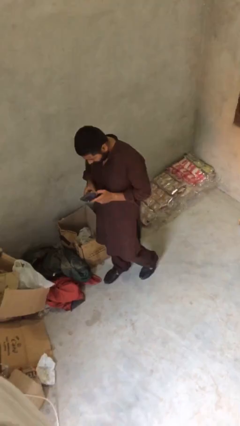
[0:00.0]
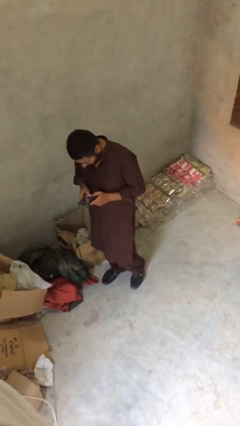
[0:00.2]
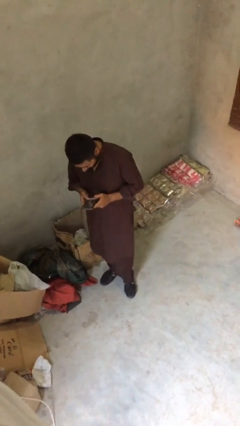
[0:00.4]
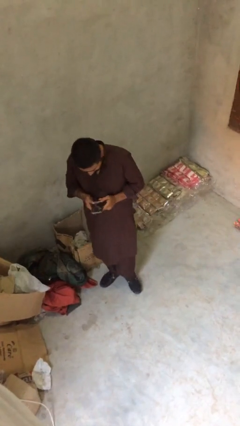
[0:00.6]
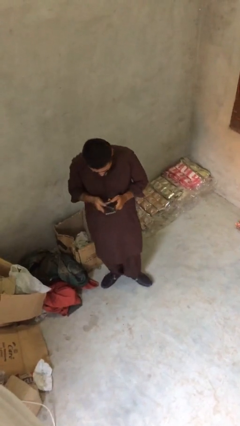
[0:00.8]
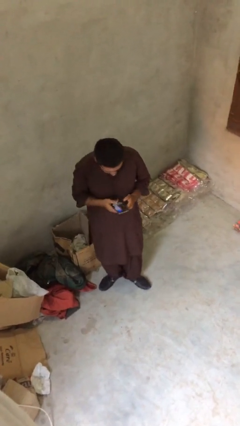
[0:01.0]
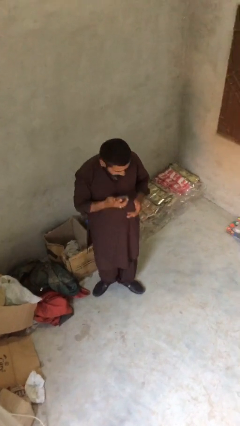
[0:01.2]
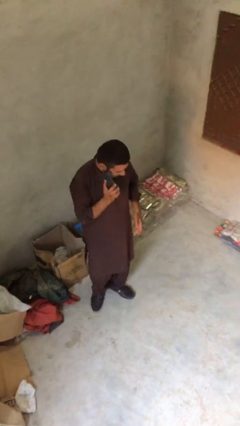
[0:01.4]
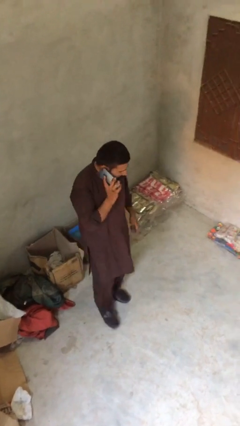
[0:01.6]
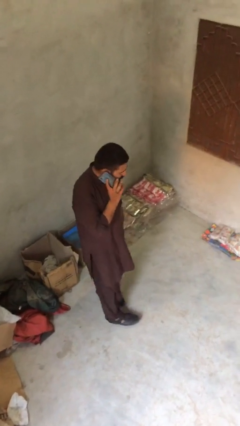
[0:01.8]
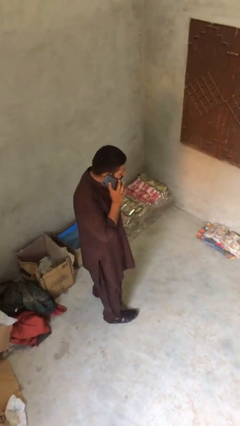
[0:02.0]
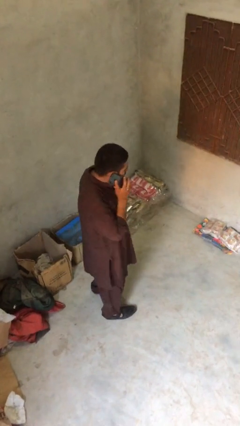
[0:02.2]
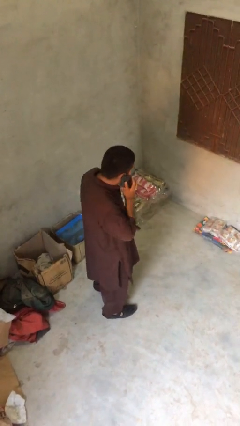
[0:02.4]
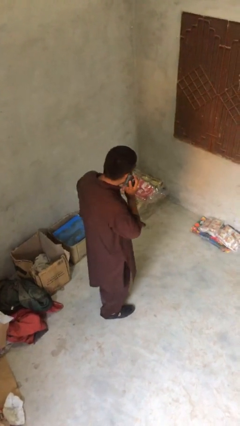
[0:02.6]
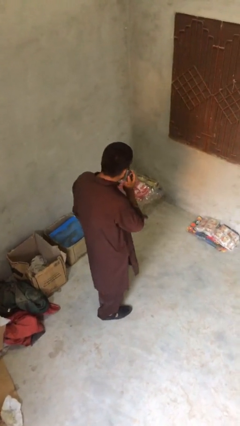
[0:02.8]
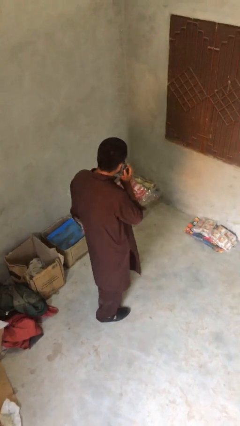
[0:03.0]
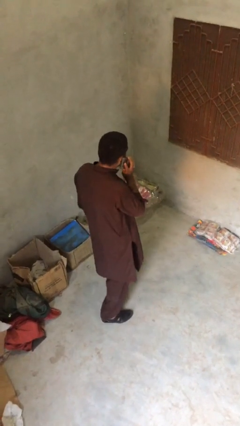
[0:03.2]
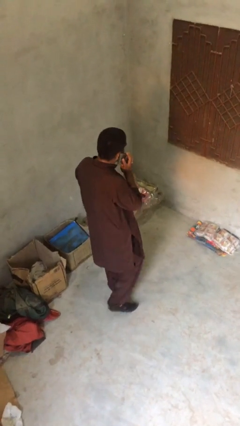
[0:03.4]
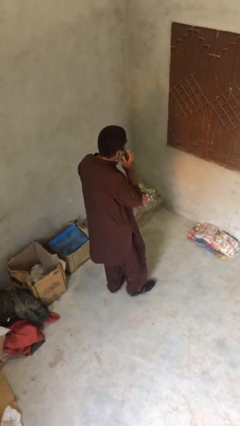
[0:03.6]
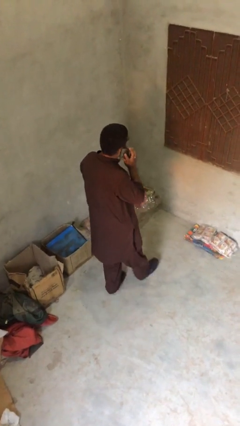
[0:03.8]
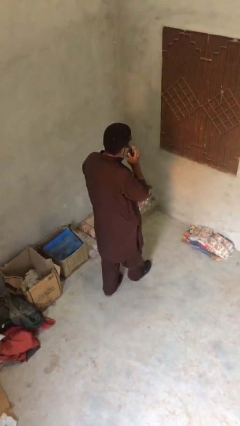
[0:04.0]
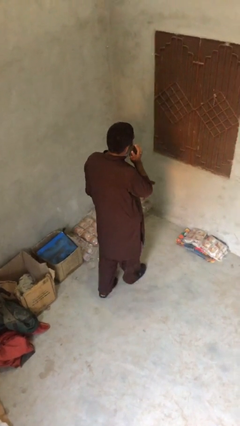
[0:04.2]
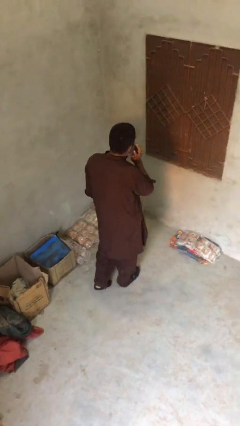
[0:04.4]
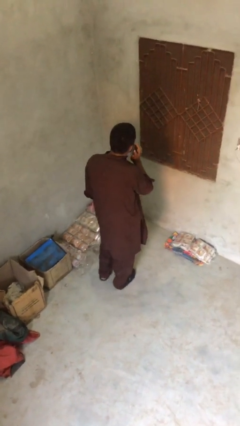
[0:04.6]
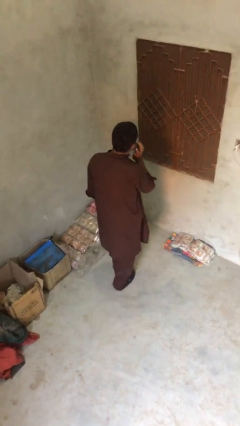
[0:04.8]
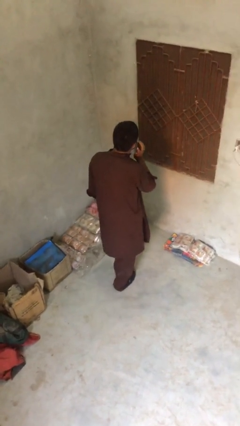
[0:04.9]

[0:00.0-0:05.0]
person talks on phone

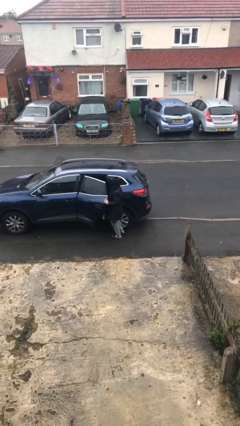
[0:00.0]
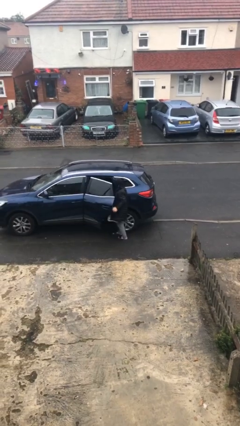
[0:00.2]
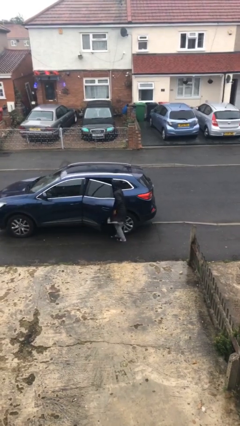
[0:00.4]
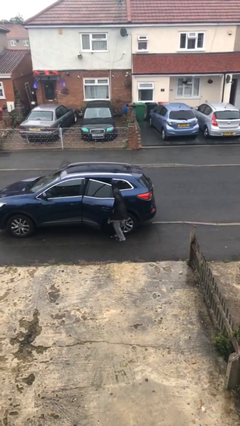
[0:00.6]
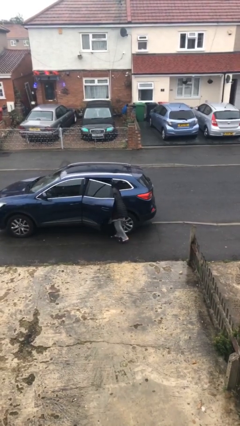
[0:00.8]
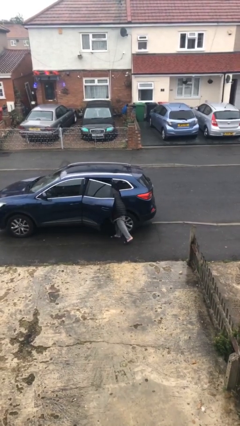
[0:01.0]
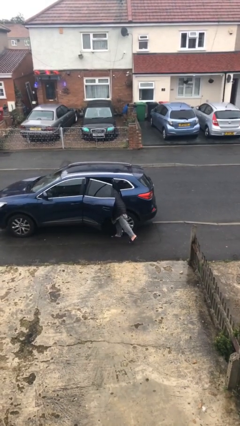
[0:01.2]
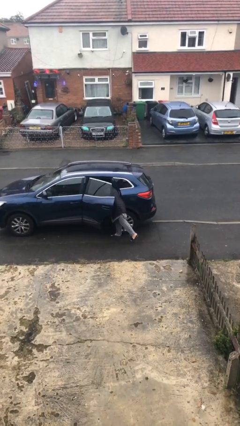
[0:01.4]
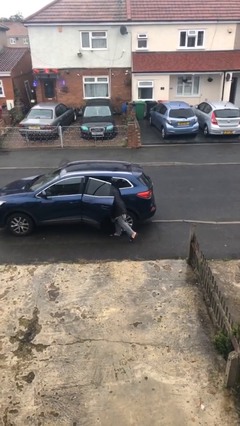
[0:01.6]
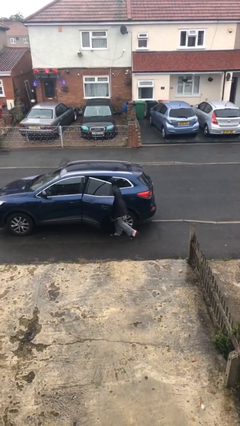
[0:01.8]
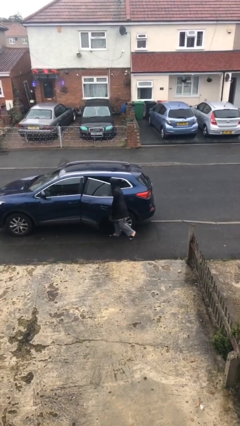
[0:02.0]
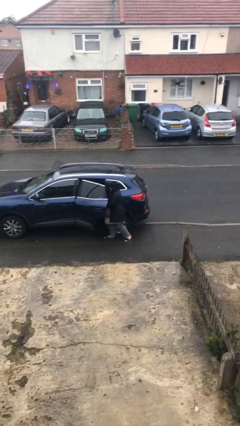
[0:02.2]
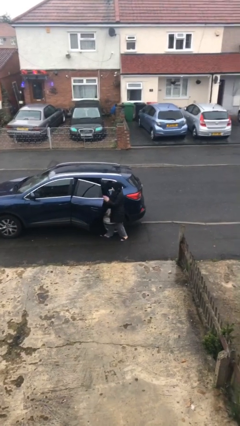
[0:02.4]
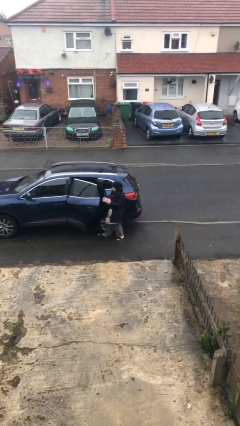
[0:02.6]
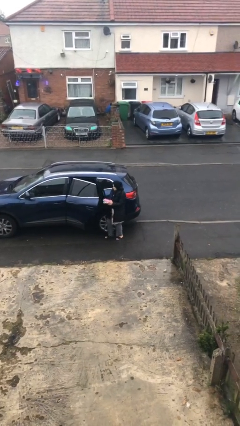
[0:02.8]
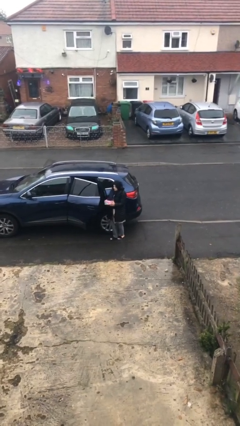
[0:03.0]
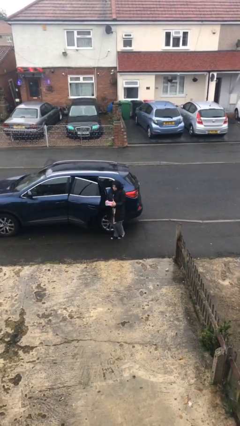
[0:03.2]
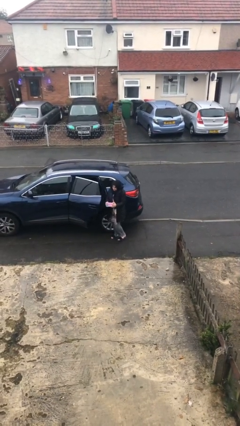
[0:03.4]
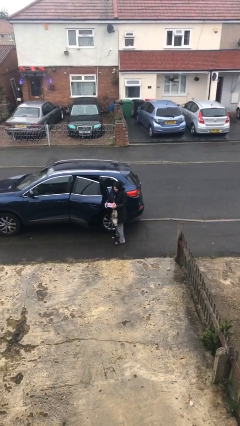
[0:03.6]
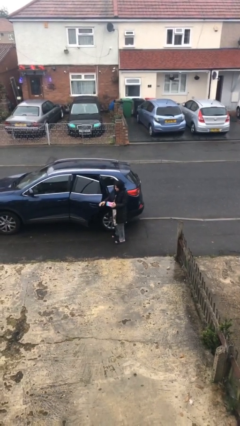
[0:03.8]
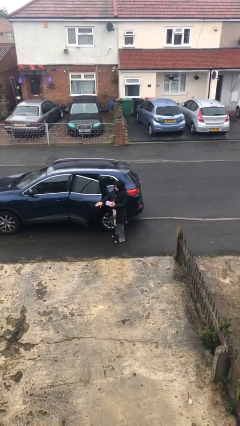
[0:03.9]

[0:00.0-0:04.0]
person unloads car

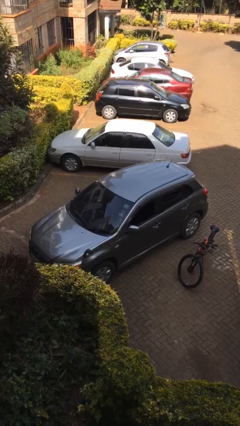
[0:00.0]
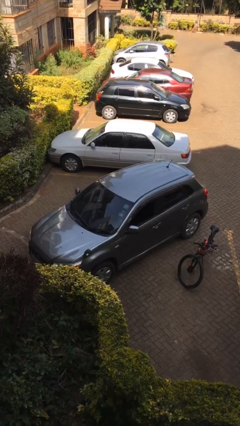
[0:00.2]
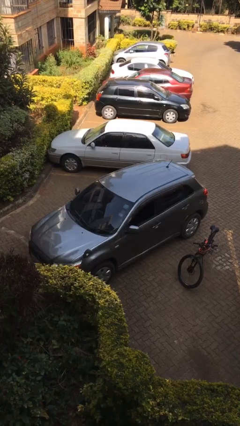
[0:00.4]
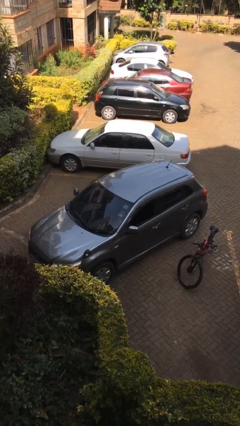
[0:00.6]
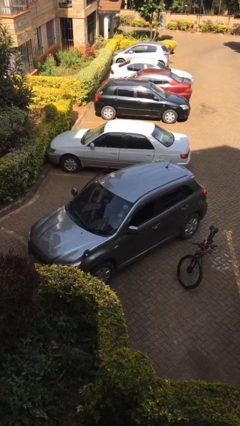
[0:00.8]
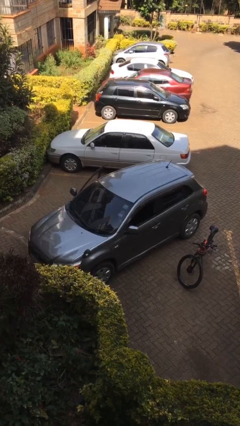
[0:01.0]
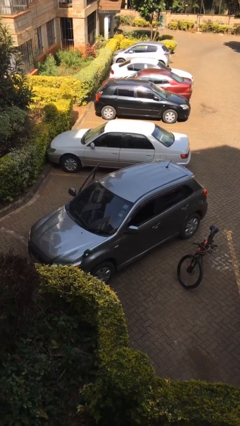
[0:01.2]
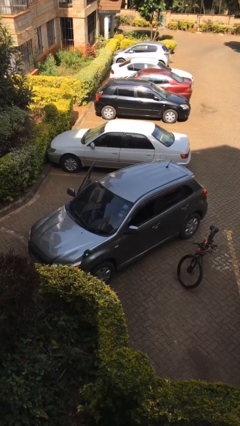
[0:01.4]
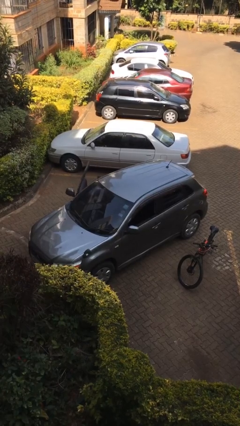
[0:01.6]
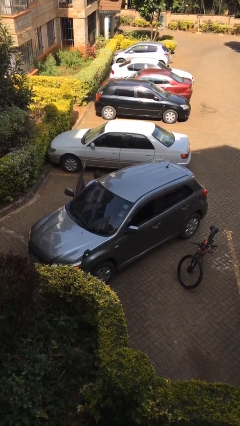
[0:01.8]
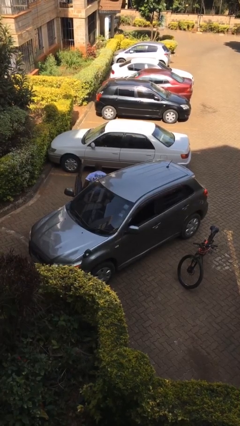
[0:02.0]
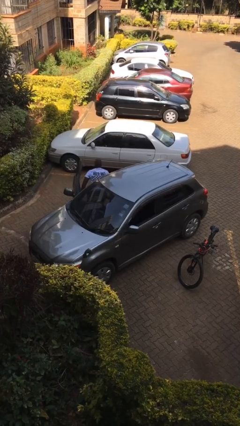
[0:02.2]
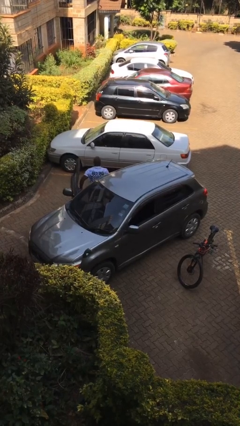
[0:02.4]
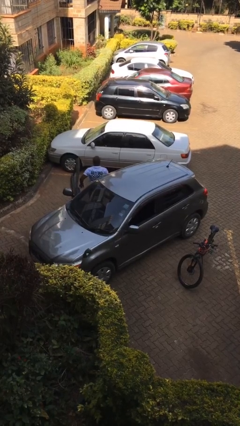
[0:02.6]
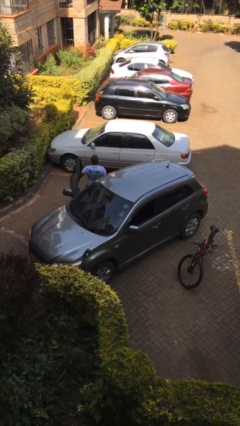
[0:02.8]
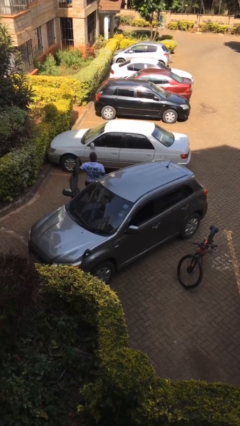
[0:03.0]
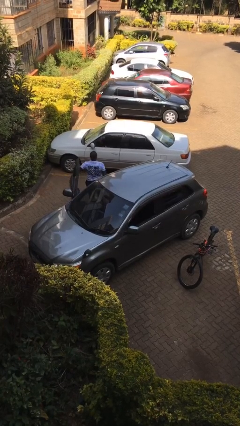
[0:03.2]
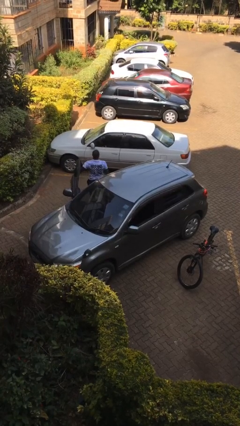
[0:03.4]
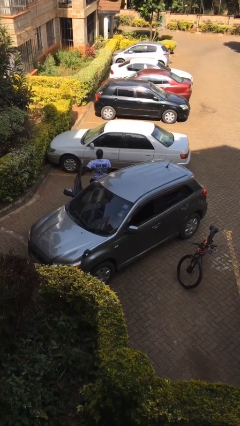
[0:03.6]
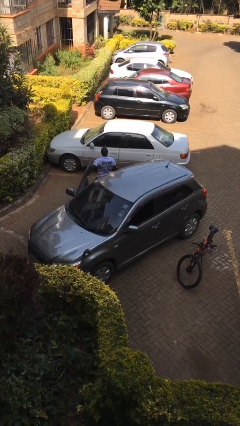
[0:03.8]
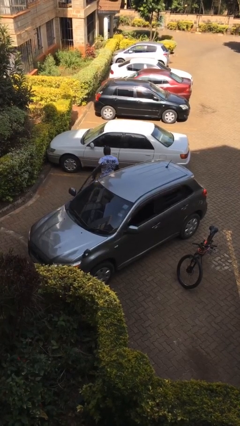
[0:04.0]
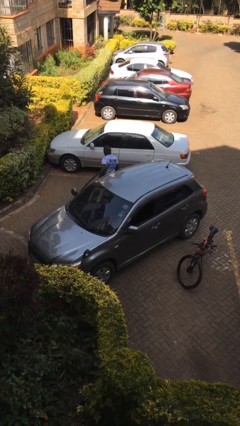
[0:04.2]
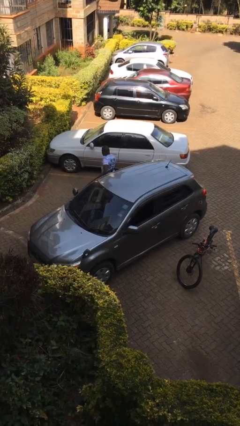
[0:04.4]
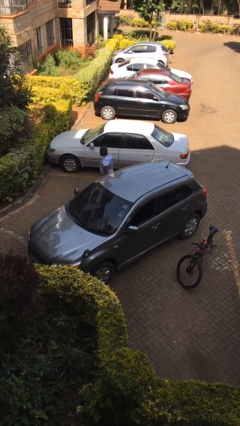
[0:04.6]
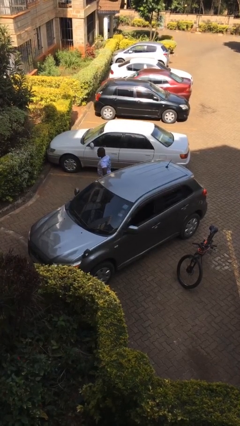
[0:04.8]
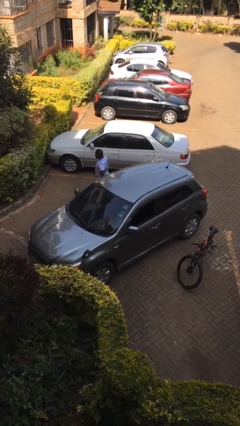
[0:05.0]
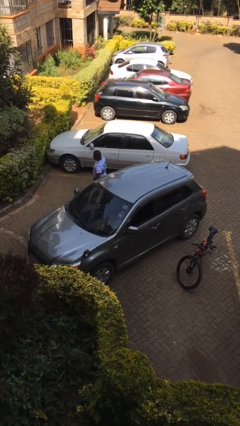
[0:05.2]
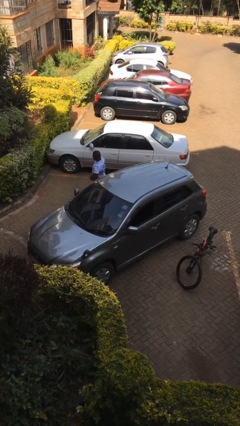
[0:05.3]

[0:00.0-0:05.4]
car drops off person

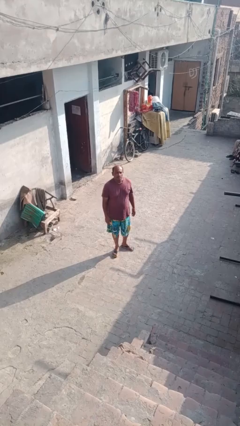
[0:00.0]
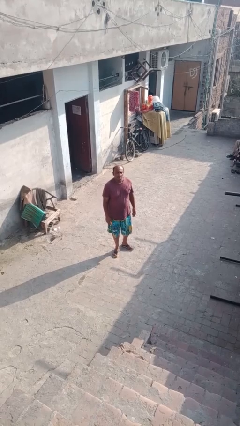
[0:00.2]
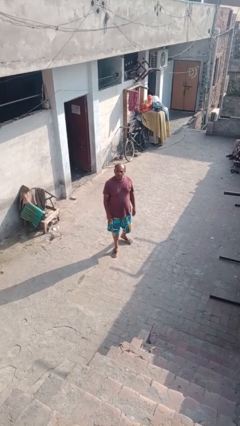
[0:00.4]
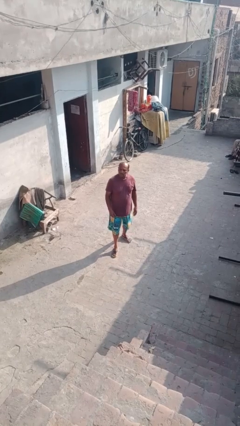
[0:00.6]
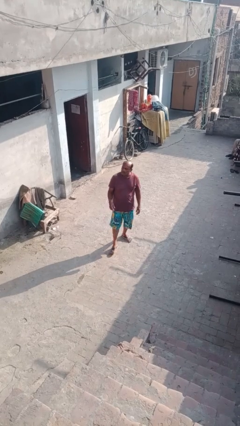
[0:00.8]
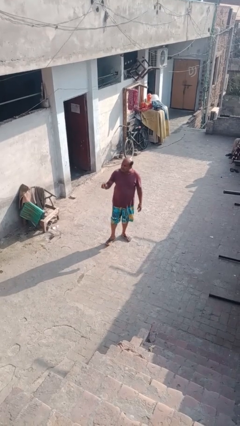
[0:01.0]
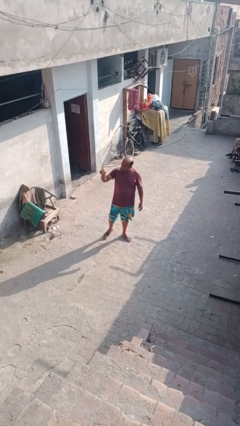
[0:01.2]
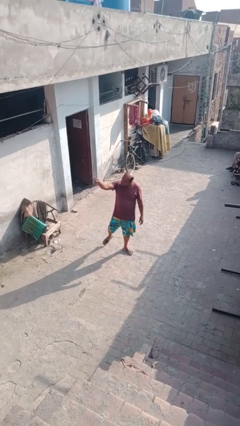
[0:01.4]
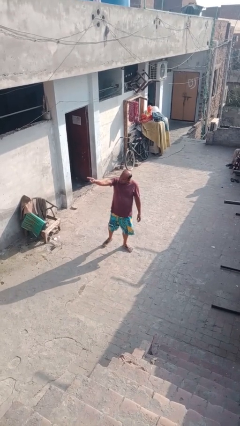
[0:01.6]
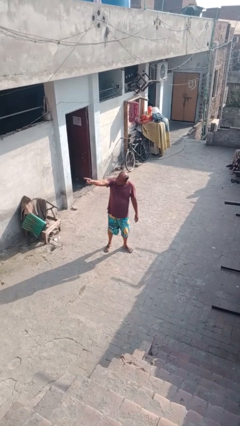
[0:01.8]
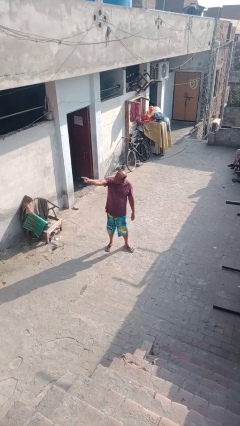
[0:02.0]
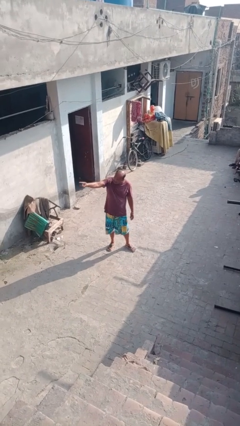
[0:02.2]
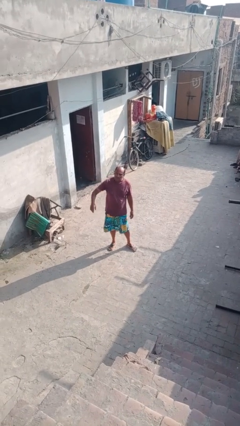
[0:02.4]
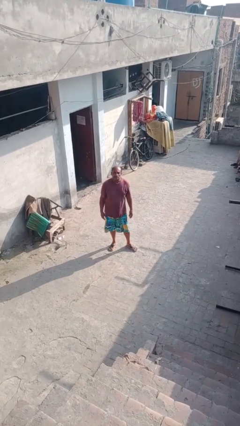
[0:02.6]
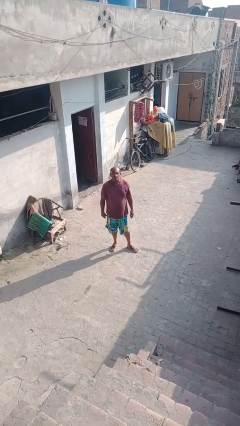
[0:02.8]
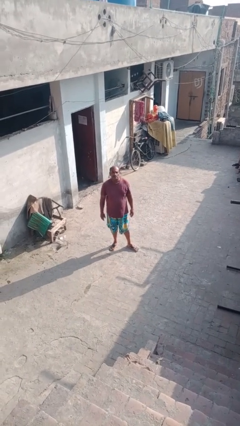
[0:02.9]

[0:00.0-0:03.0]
person points at person

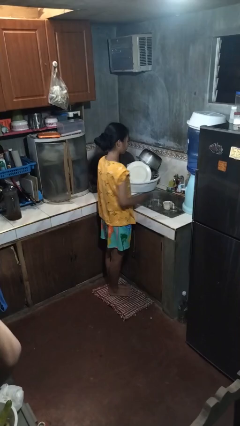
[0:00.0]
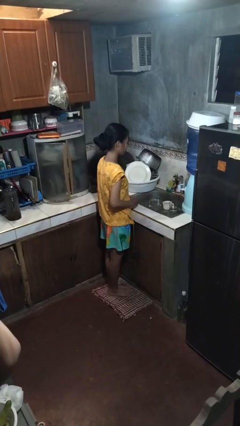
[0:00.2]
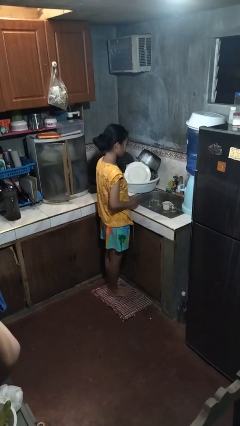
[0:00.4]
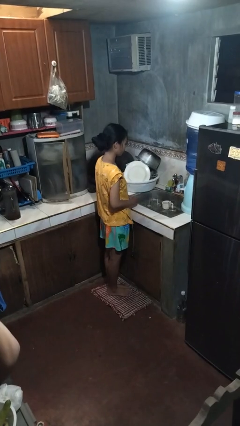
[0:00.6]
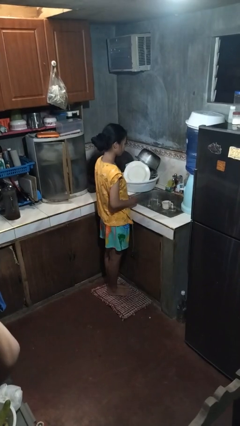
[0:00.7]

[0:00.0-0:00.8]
person turns off faucet
